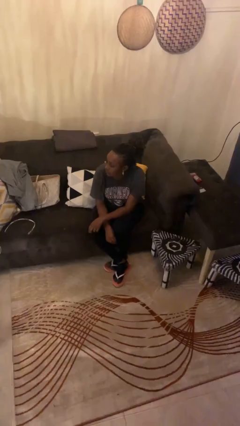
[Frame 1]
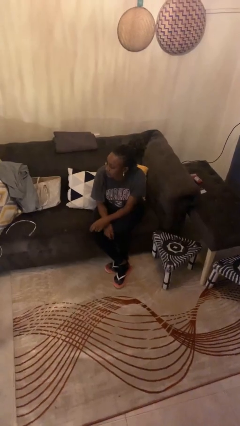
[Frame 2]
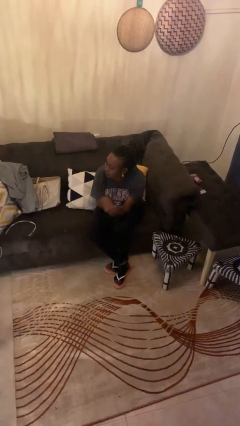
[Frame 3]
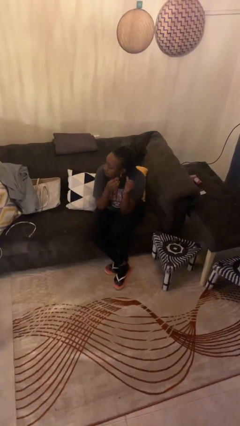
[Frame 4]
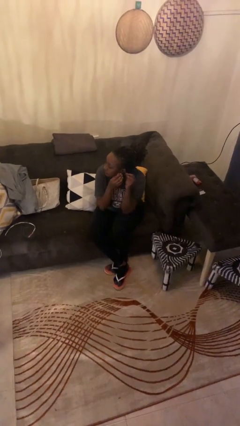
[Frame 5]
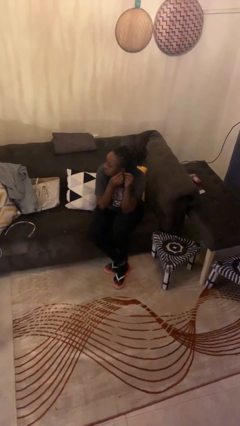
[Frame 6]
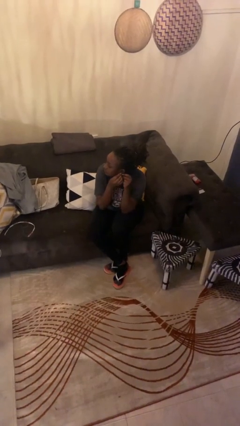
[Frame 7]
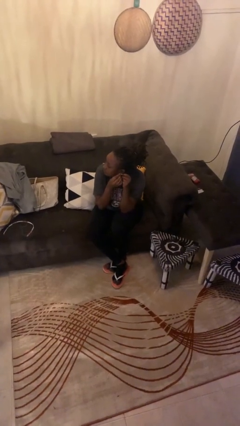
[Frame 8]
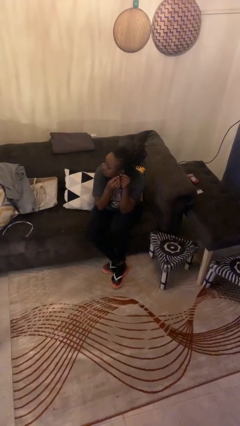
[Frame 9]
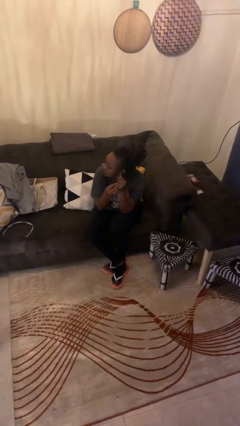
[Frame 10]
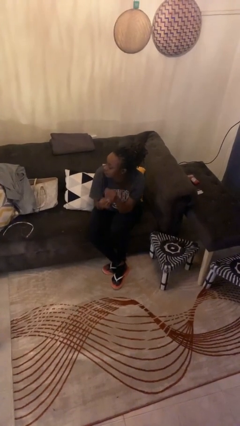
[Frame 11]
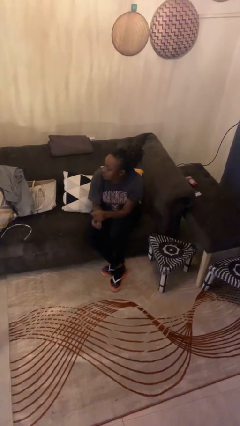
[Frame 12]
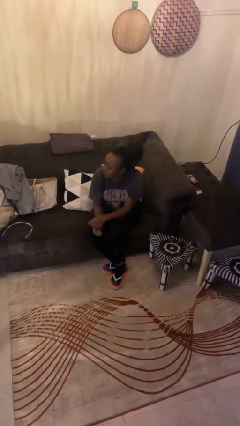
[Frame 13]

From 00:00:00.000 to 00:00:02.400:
person takes off earrings

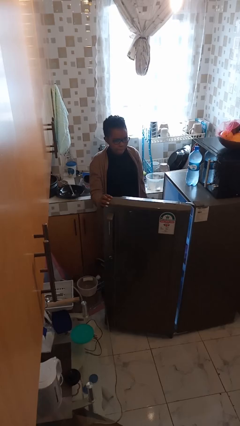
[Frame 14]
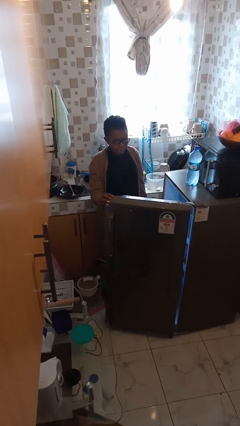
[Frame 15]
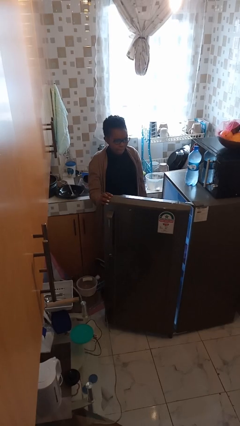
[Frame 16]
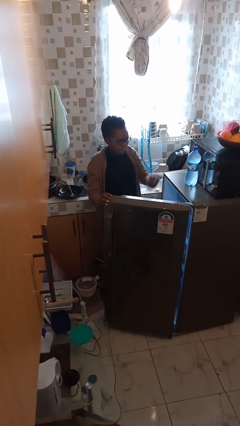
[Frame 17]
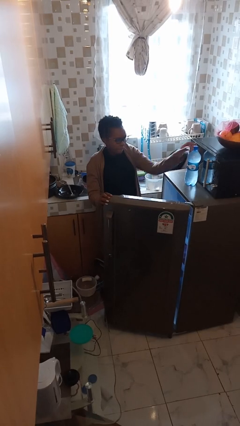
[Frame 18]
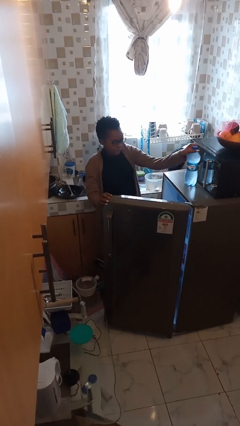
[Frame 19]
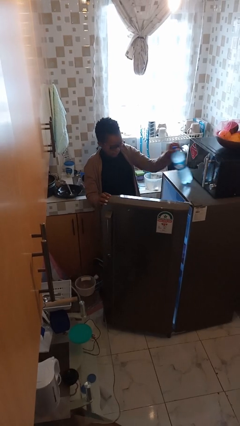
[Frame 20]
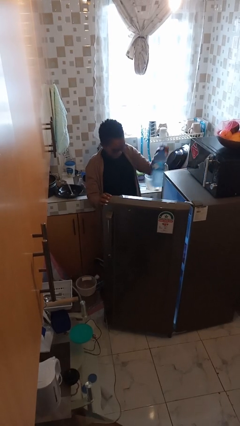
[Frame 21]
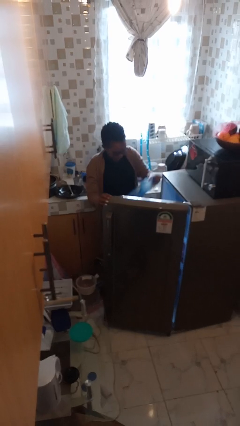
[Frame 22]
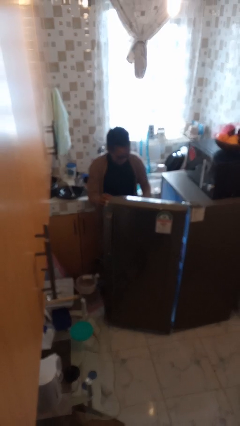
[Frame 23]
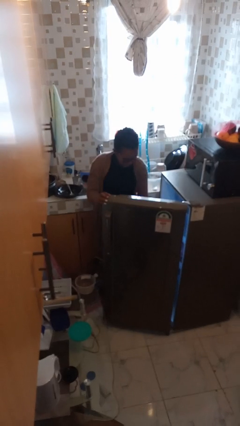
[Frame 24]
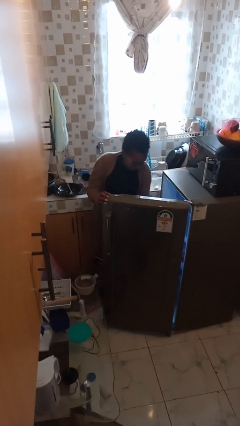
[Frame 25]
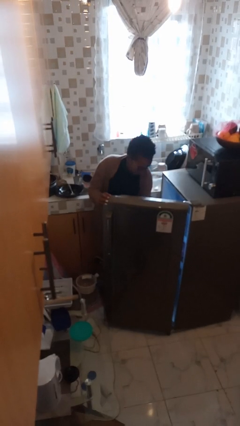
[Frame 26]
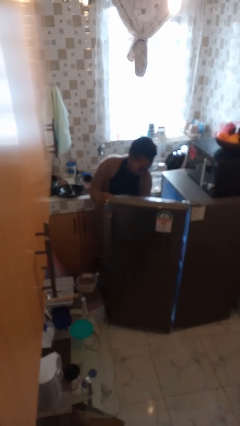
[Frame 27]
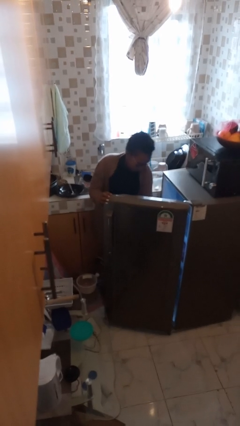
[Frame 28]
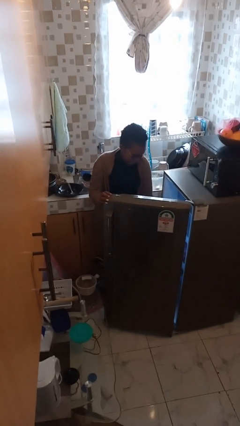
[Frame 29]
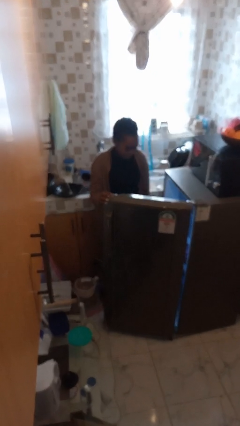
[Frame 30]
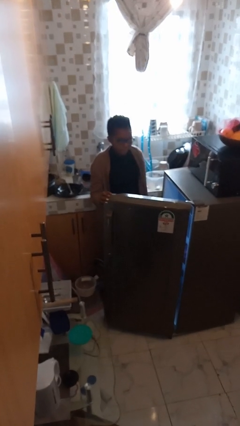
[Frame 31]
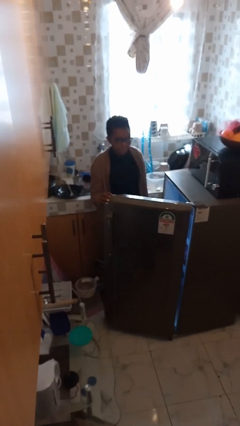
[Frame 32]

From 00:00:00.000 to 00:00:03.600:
person puts object into refrigerator

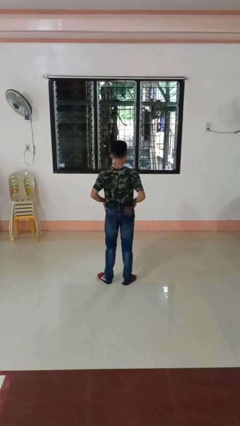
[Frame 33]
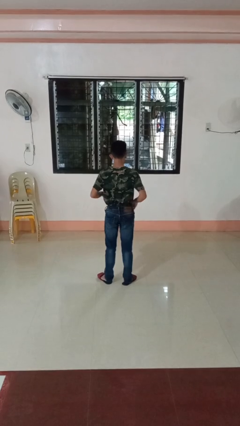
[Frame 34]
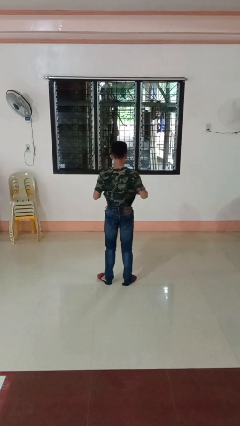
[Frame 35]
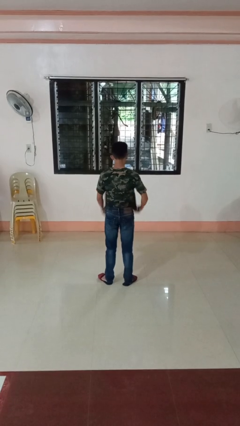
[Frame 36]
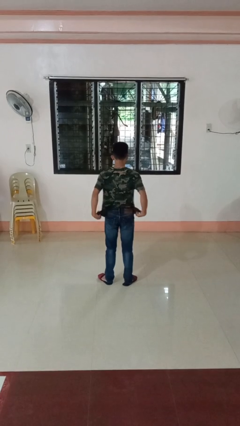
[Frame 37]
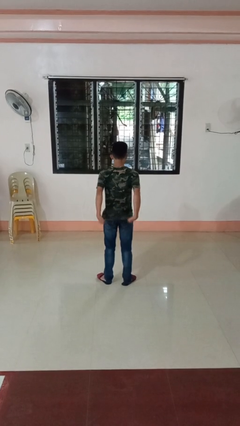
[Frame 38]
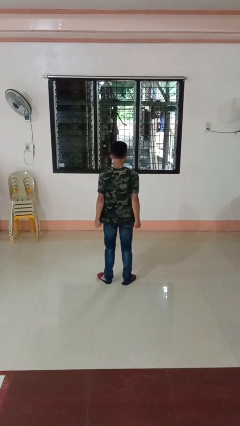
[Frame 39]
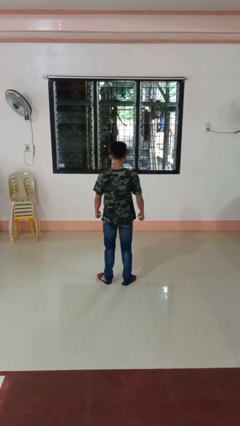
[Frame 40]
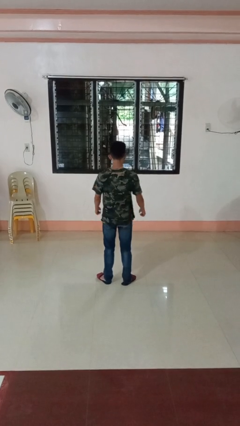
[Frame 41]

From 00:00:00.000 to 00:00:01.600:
person untucks shirt

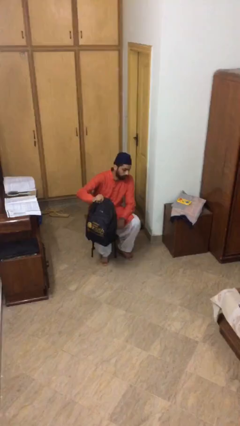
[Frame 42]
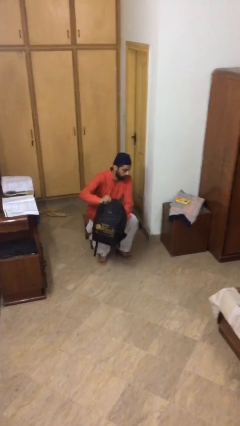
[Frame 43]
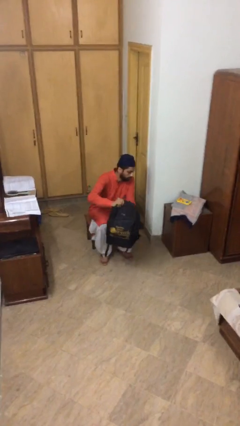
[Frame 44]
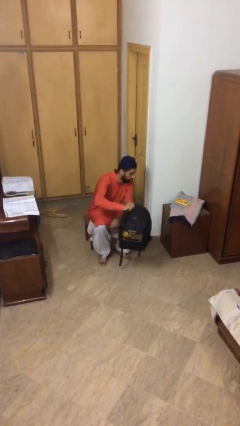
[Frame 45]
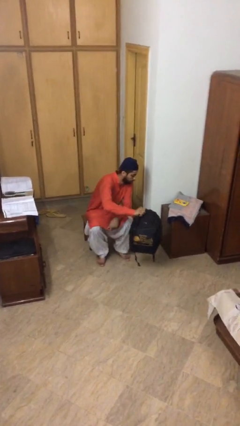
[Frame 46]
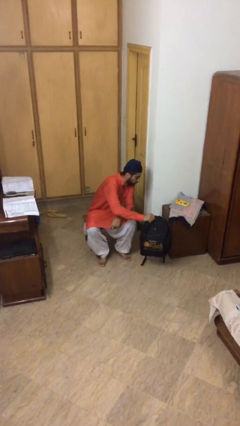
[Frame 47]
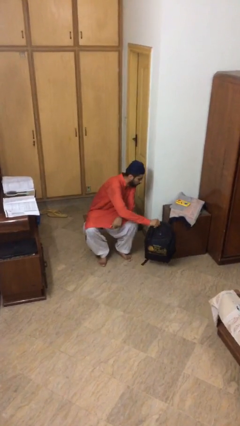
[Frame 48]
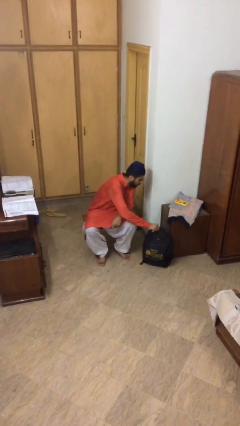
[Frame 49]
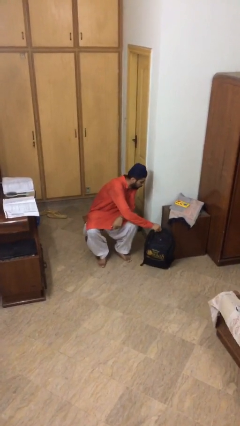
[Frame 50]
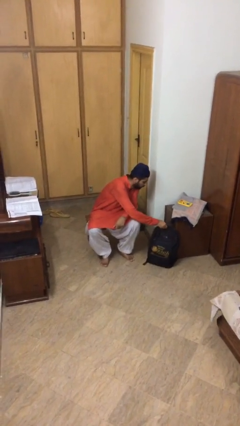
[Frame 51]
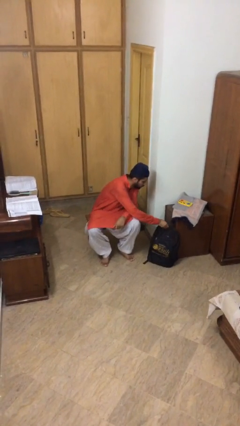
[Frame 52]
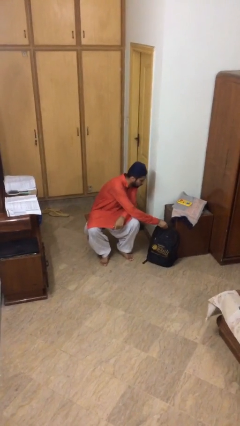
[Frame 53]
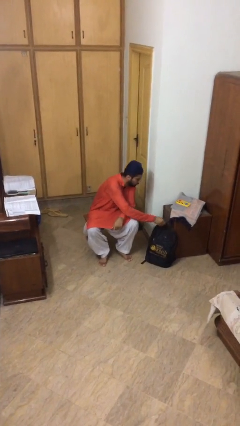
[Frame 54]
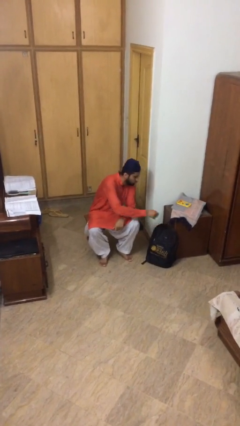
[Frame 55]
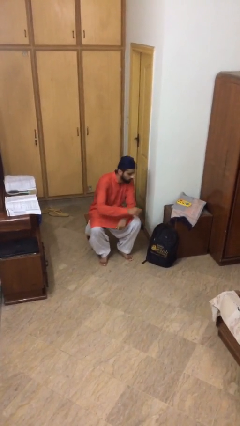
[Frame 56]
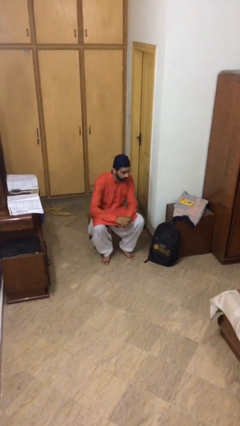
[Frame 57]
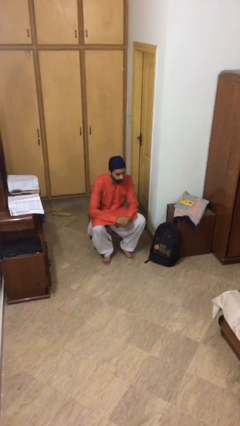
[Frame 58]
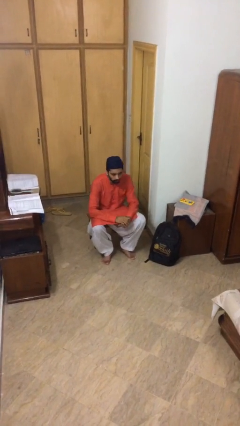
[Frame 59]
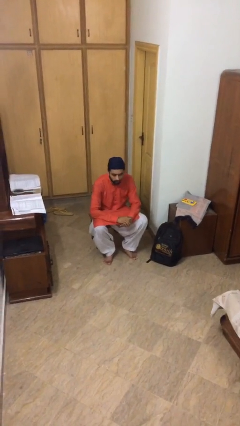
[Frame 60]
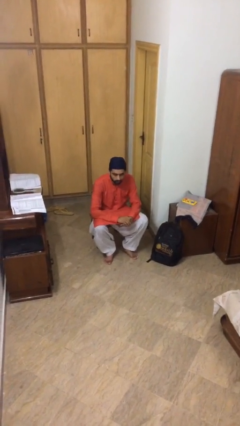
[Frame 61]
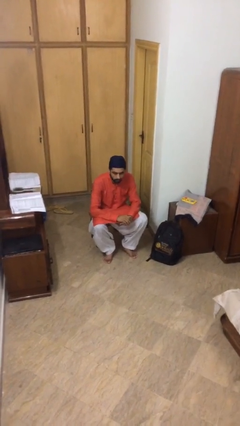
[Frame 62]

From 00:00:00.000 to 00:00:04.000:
person puts down object on floor

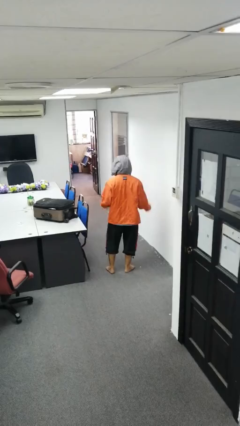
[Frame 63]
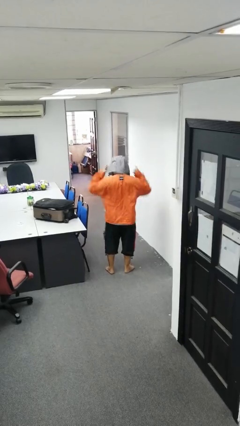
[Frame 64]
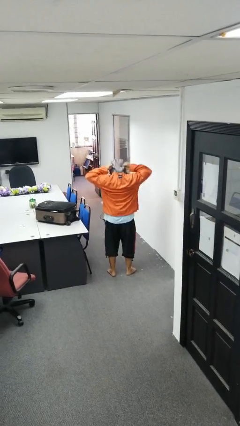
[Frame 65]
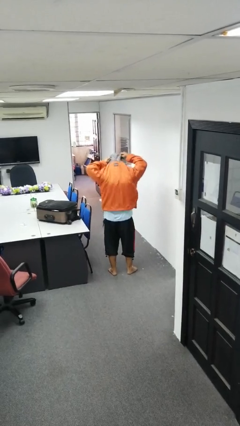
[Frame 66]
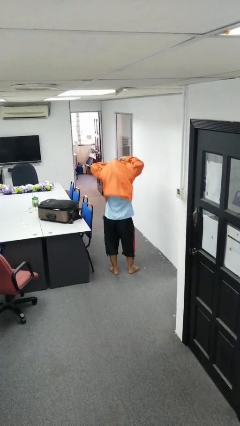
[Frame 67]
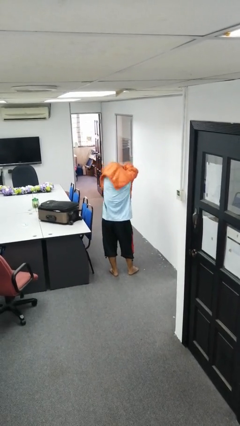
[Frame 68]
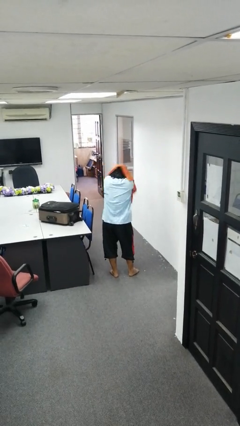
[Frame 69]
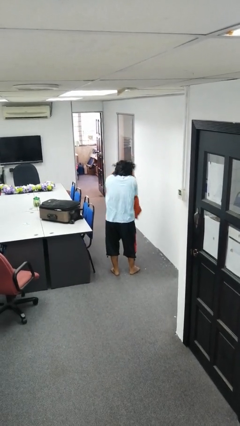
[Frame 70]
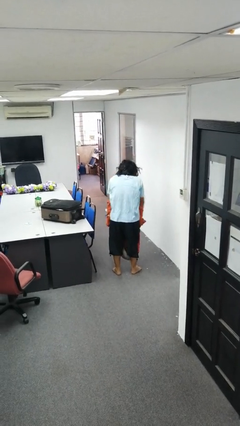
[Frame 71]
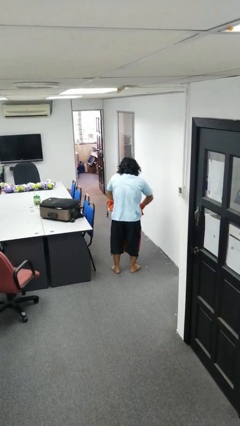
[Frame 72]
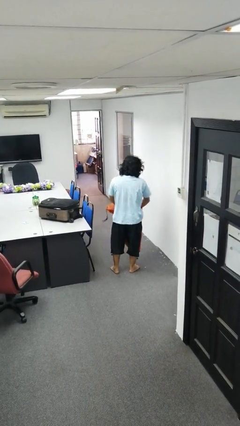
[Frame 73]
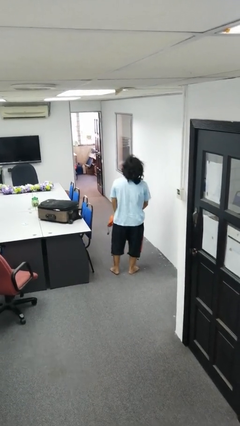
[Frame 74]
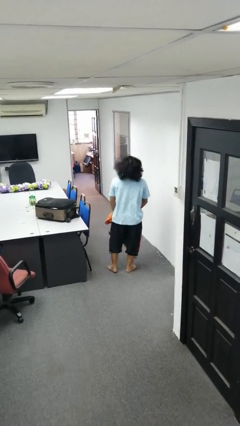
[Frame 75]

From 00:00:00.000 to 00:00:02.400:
person takes off hoodie

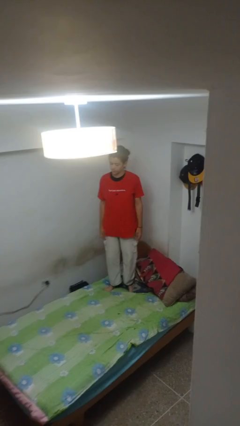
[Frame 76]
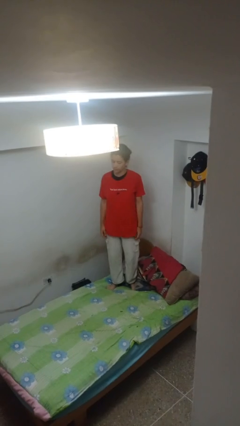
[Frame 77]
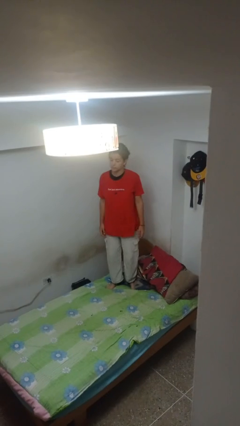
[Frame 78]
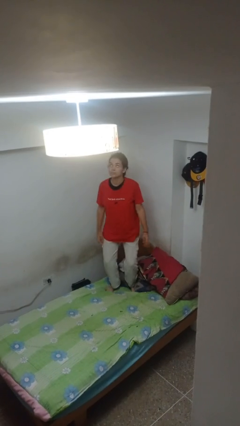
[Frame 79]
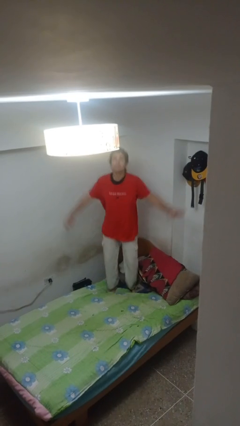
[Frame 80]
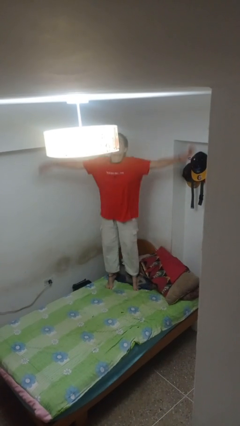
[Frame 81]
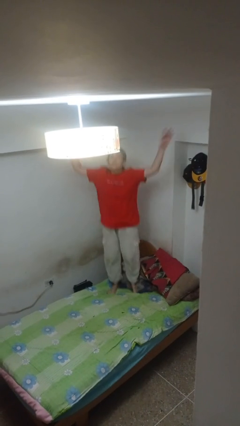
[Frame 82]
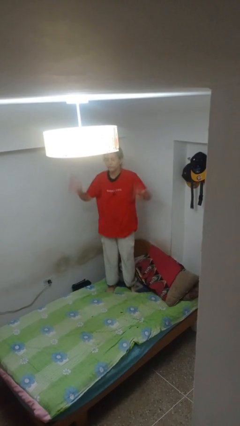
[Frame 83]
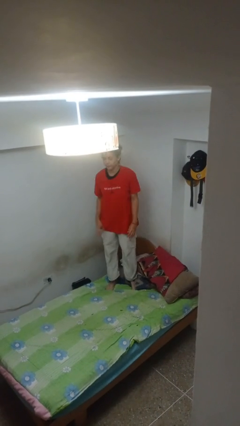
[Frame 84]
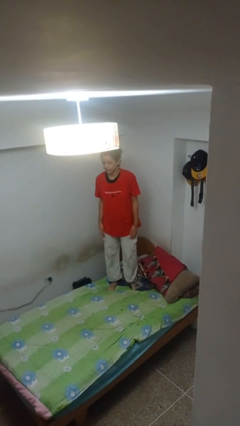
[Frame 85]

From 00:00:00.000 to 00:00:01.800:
person jumps on bed

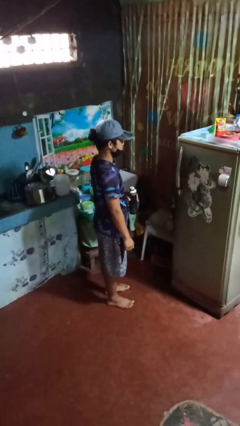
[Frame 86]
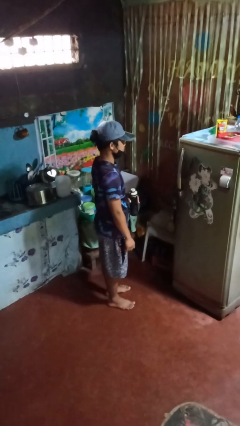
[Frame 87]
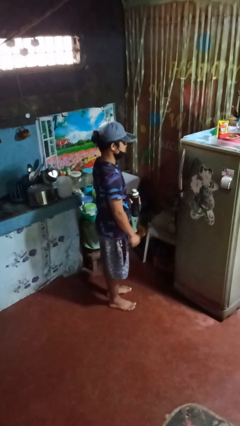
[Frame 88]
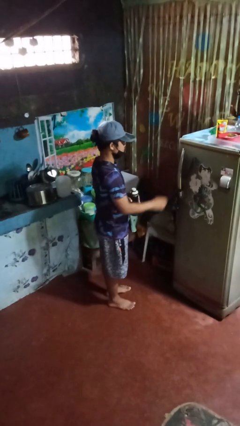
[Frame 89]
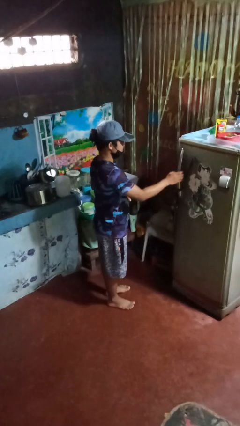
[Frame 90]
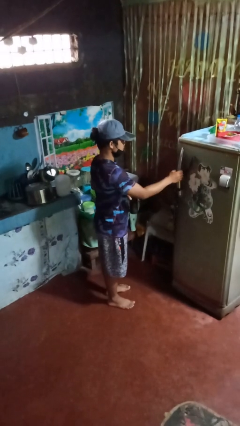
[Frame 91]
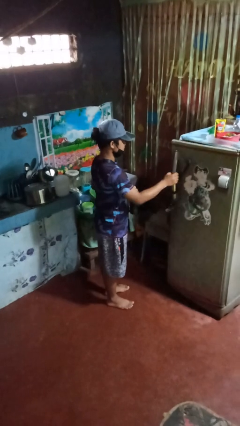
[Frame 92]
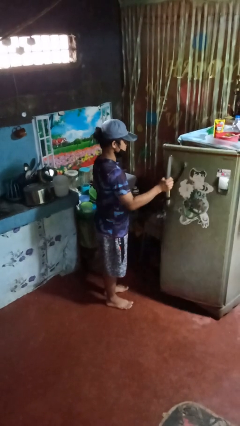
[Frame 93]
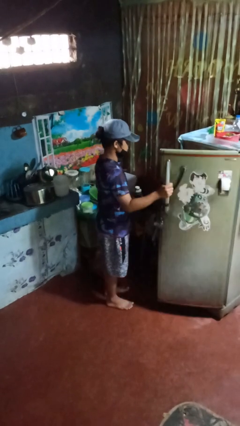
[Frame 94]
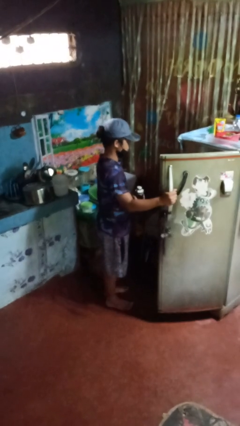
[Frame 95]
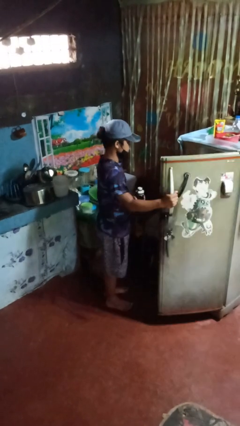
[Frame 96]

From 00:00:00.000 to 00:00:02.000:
person opens refrigerator
